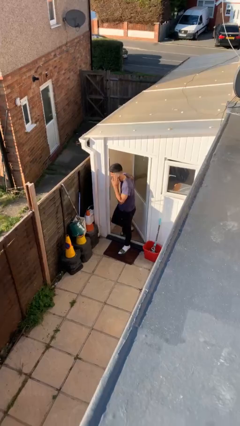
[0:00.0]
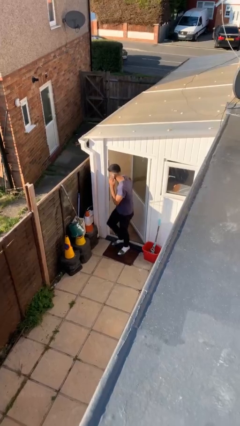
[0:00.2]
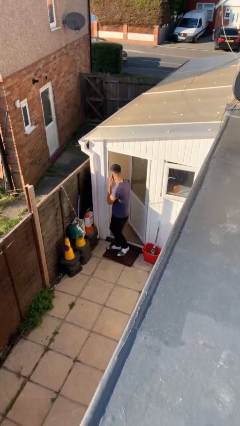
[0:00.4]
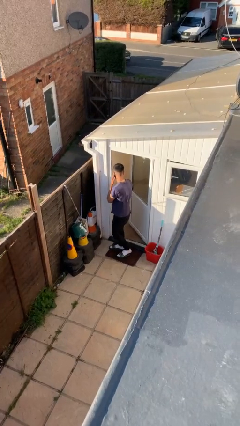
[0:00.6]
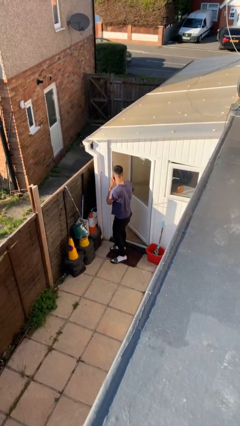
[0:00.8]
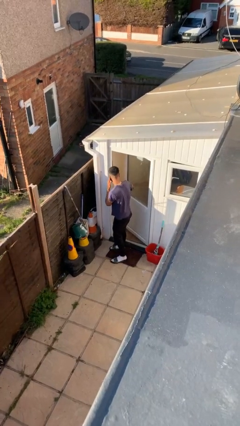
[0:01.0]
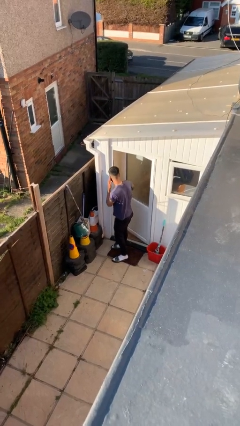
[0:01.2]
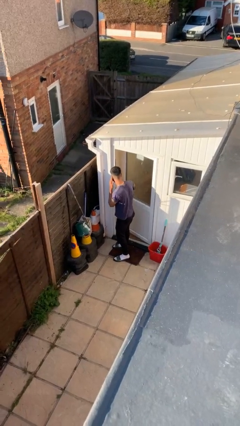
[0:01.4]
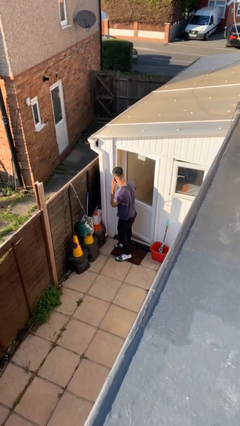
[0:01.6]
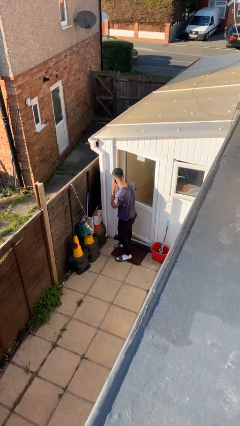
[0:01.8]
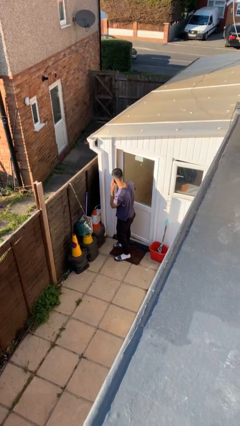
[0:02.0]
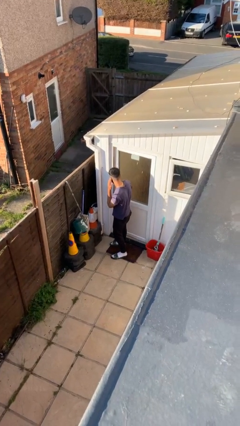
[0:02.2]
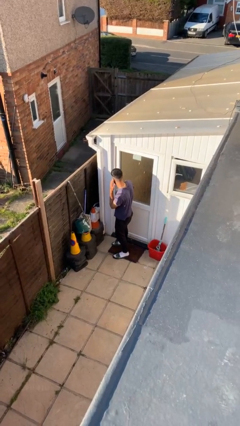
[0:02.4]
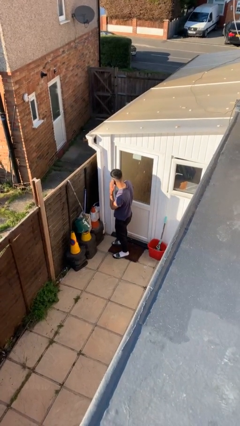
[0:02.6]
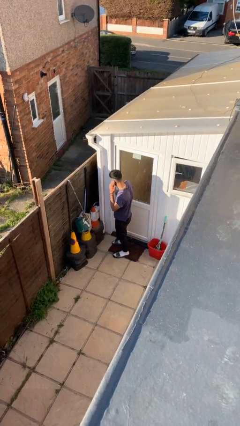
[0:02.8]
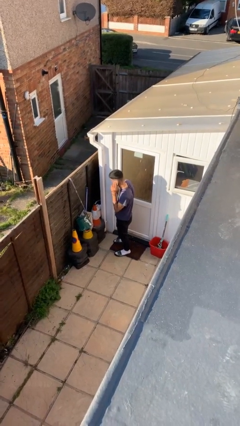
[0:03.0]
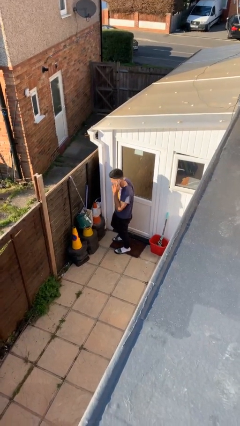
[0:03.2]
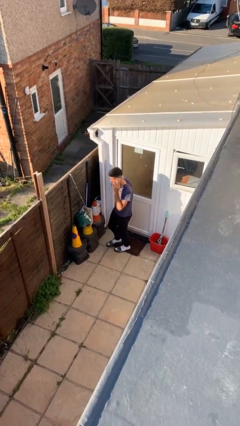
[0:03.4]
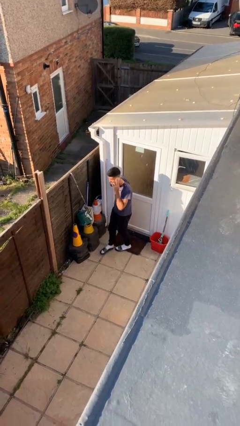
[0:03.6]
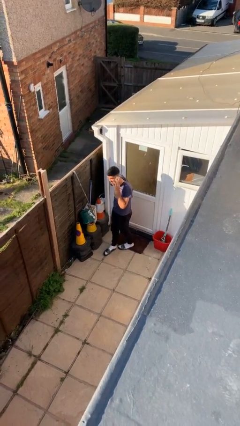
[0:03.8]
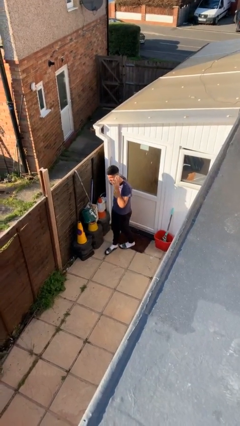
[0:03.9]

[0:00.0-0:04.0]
person closes facility door

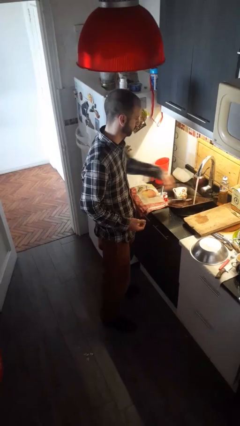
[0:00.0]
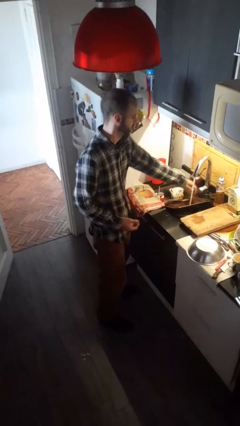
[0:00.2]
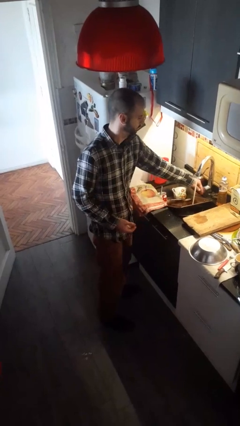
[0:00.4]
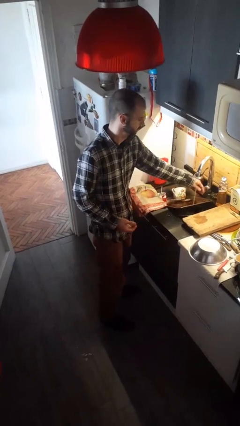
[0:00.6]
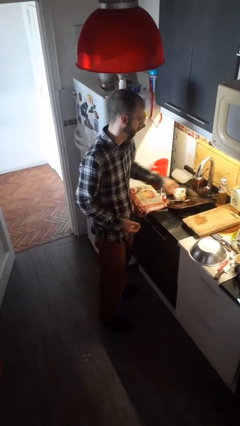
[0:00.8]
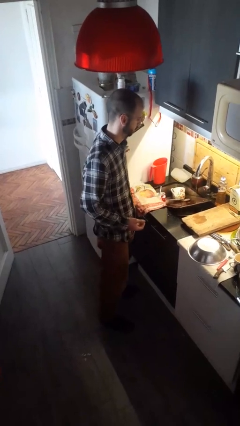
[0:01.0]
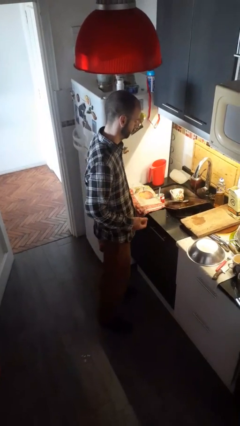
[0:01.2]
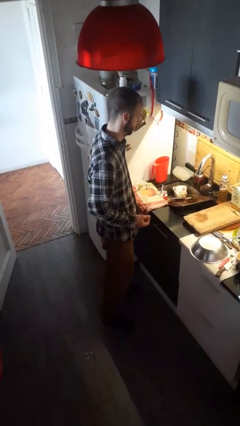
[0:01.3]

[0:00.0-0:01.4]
person turns off faucet

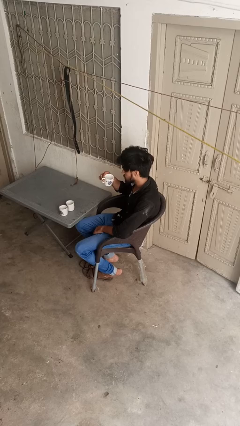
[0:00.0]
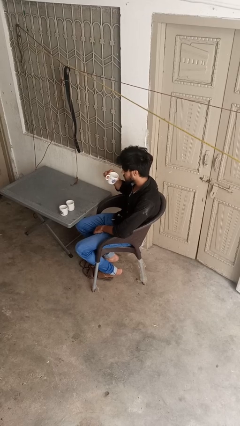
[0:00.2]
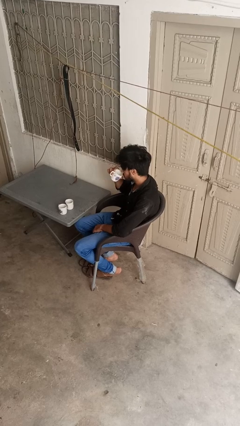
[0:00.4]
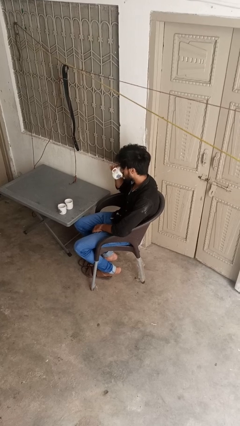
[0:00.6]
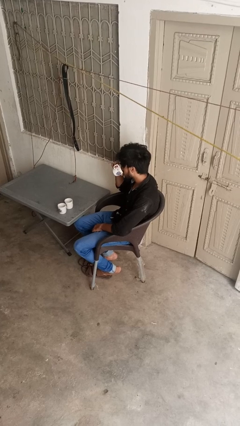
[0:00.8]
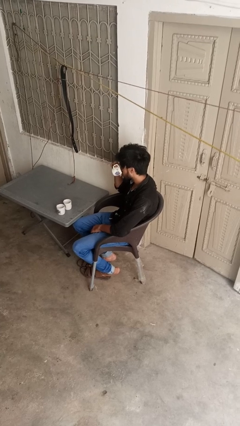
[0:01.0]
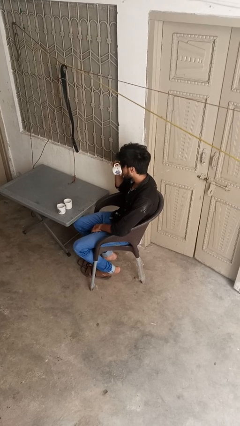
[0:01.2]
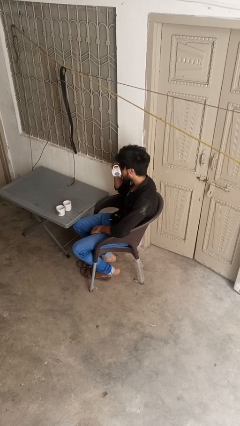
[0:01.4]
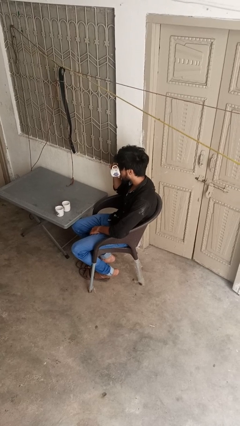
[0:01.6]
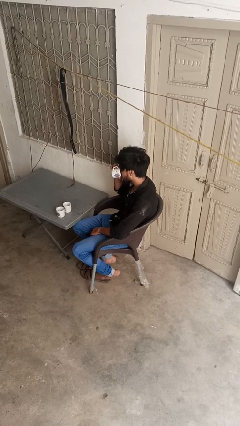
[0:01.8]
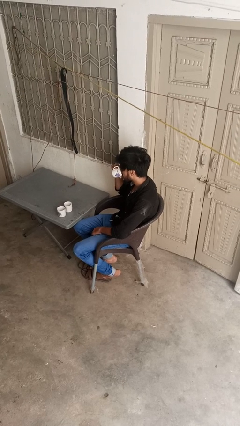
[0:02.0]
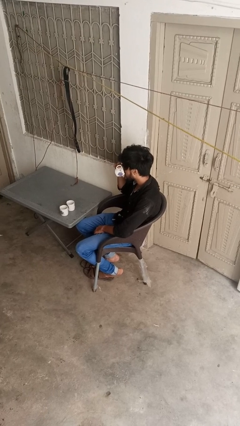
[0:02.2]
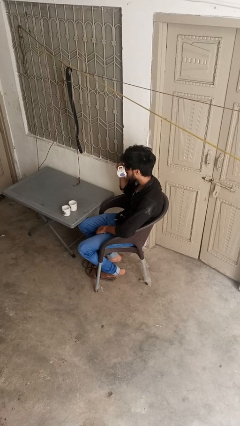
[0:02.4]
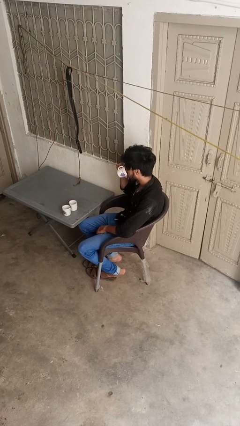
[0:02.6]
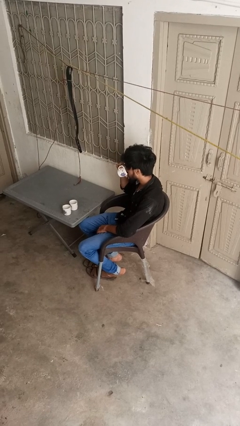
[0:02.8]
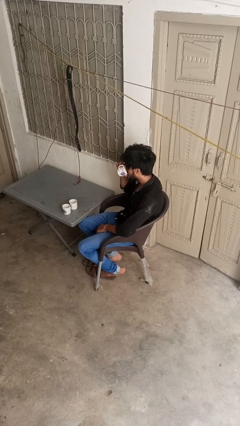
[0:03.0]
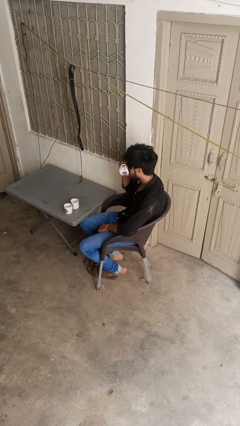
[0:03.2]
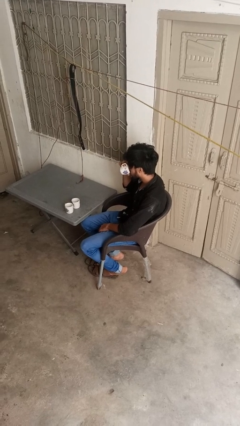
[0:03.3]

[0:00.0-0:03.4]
person drinks from shotglass

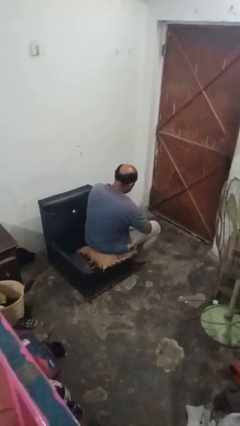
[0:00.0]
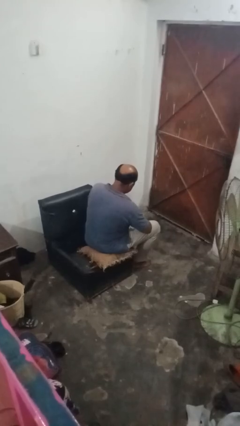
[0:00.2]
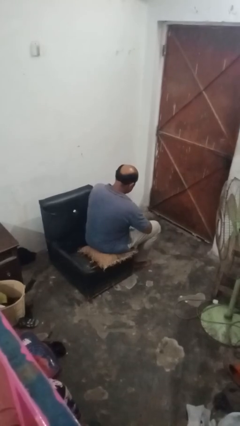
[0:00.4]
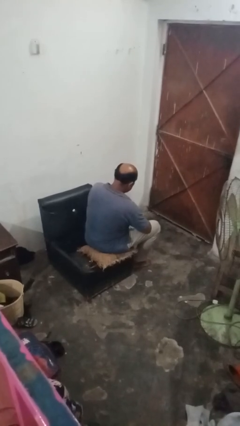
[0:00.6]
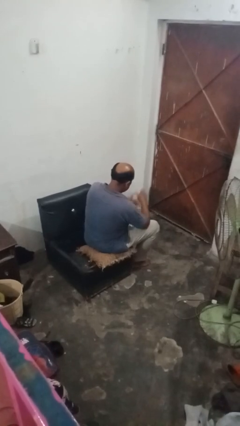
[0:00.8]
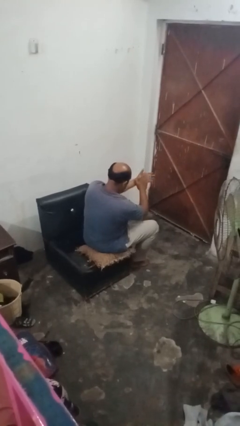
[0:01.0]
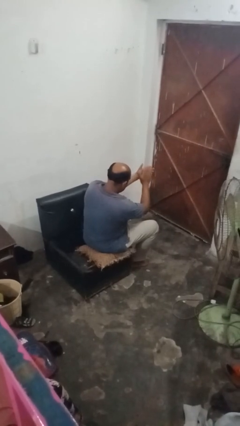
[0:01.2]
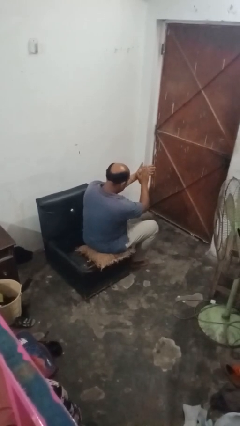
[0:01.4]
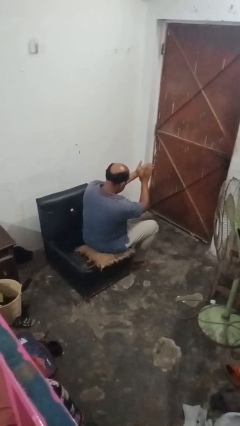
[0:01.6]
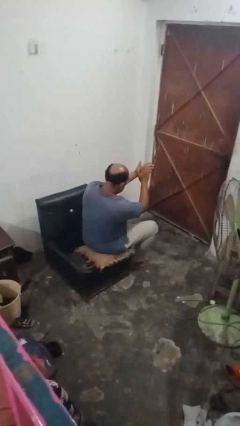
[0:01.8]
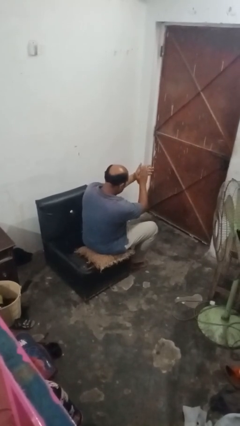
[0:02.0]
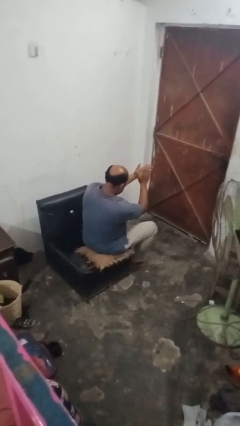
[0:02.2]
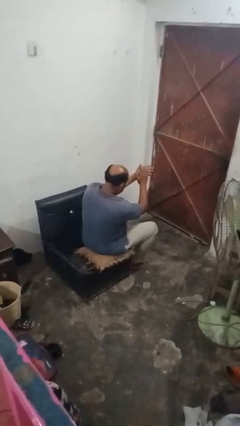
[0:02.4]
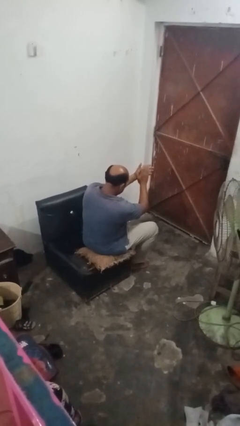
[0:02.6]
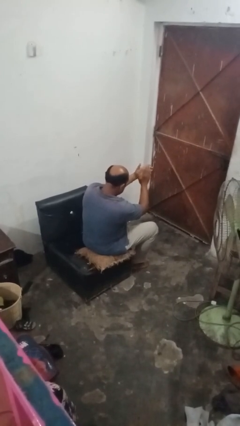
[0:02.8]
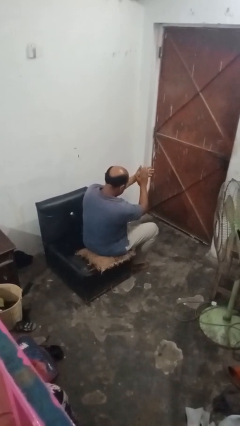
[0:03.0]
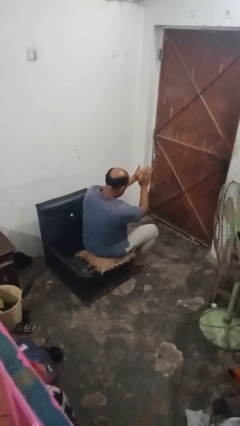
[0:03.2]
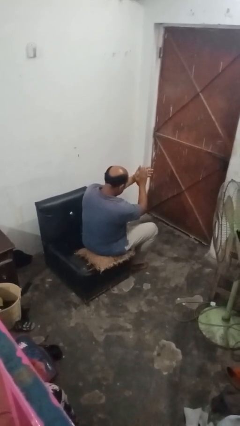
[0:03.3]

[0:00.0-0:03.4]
person claps hands

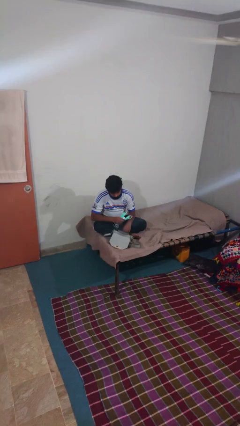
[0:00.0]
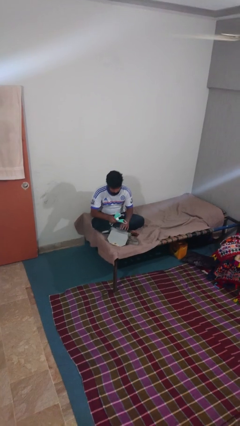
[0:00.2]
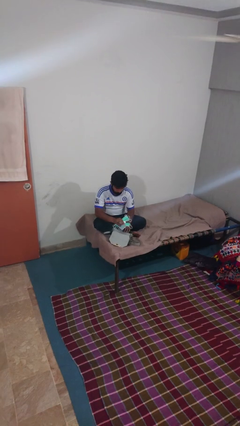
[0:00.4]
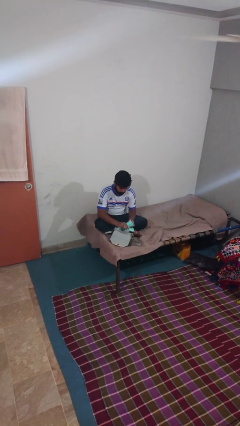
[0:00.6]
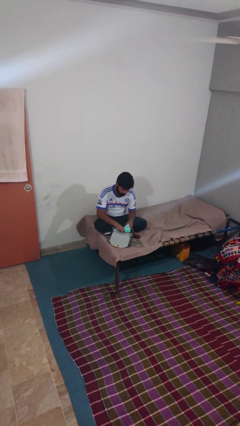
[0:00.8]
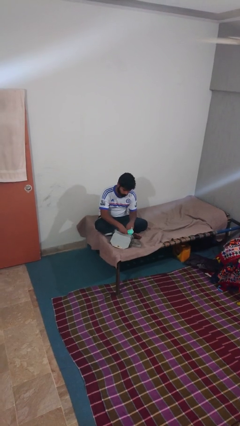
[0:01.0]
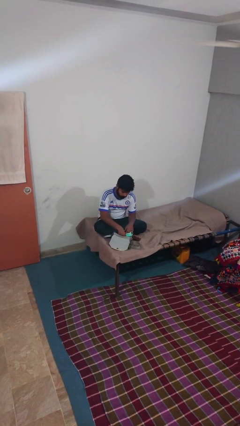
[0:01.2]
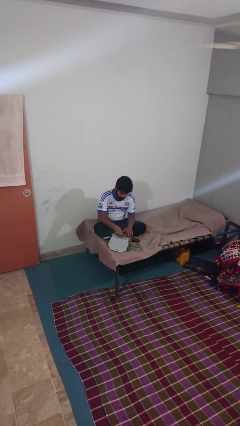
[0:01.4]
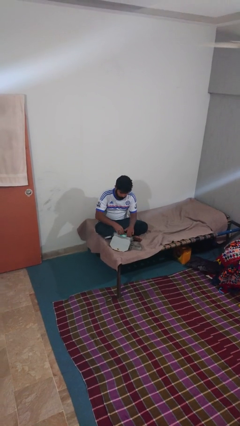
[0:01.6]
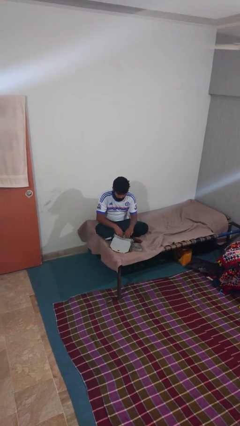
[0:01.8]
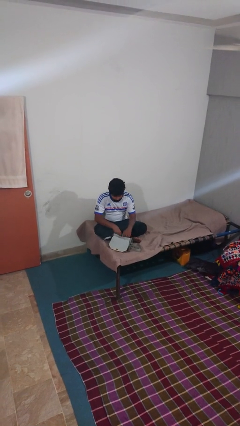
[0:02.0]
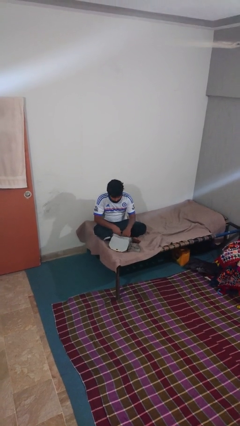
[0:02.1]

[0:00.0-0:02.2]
person puts object into purse

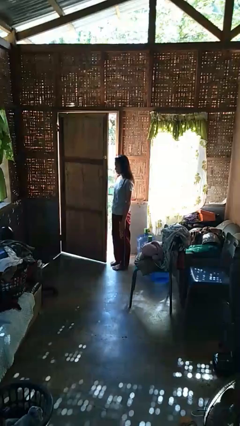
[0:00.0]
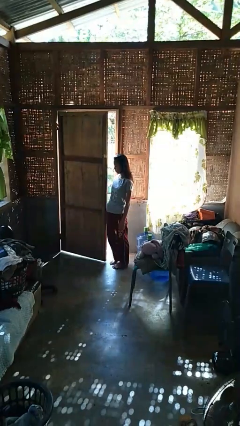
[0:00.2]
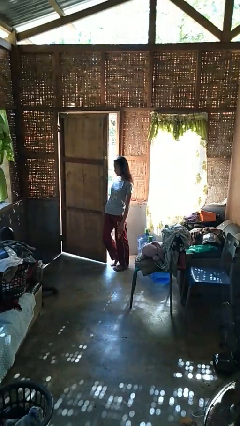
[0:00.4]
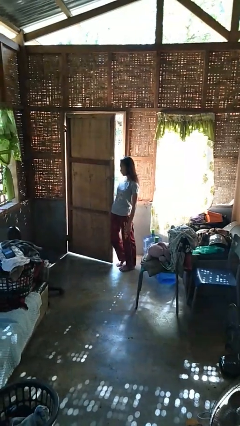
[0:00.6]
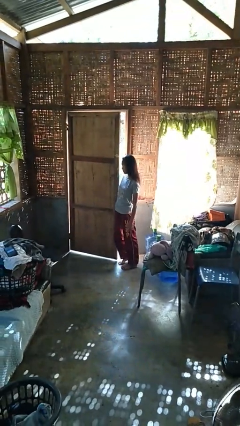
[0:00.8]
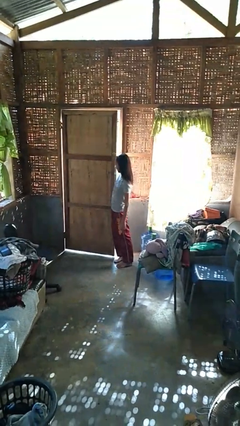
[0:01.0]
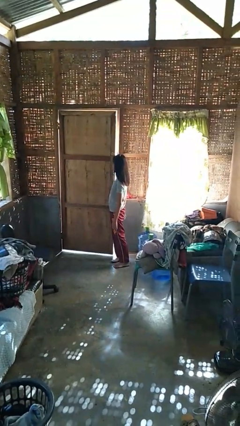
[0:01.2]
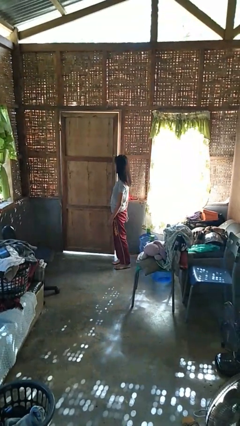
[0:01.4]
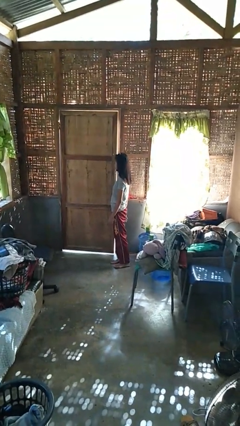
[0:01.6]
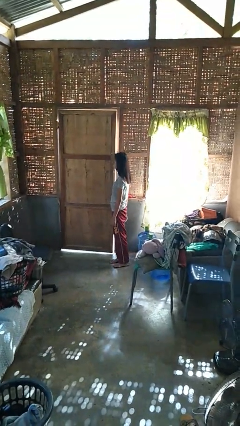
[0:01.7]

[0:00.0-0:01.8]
person closes door with hip

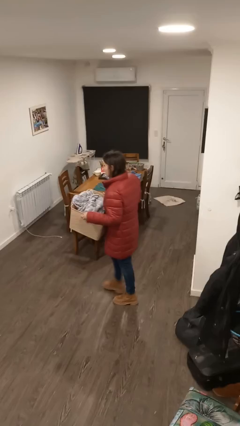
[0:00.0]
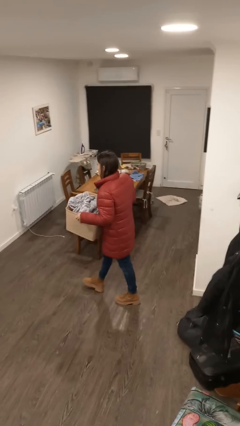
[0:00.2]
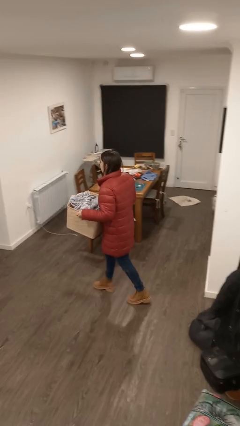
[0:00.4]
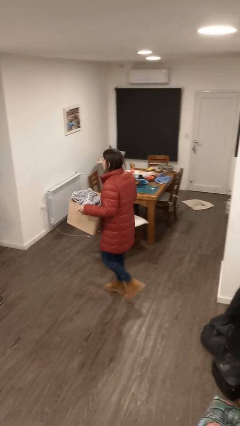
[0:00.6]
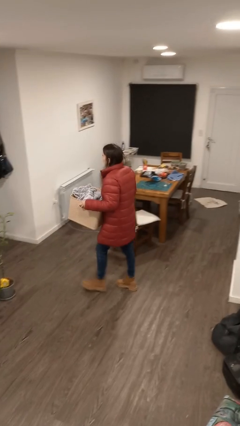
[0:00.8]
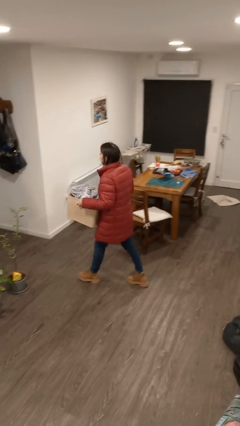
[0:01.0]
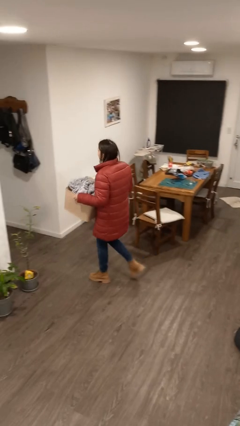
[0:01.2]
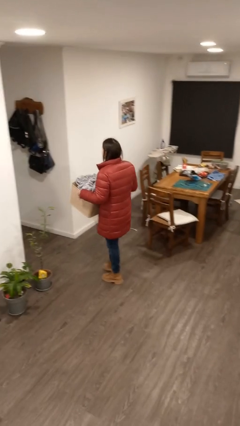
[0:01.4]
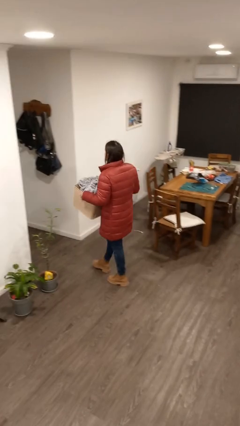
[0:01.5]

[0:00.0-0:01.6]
person carries laundry basket
